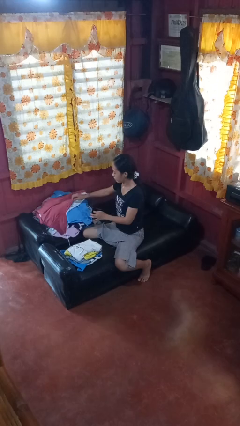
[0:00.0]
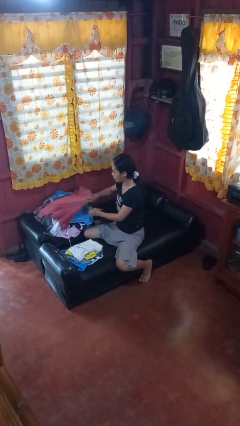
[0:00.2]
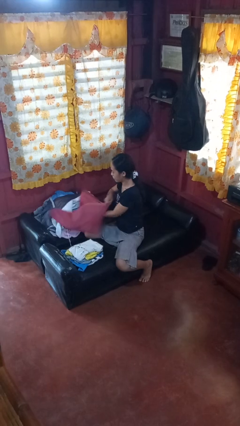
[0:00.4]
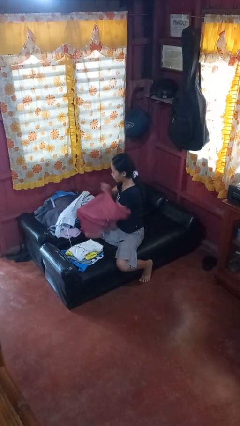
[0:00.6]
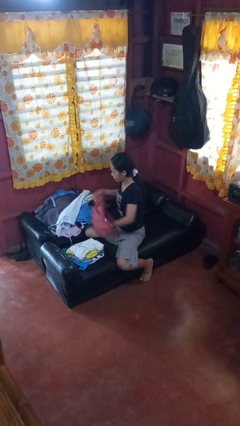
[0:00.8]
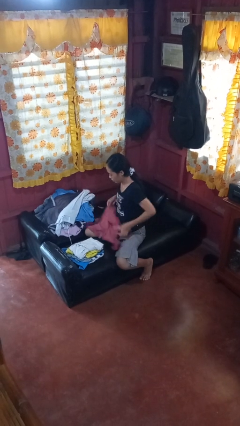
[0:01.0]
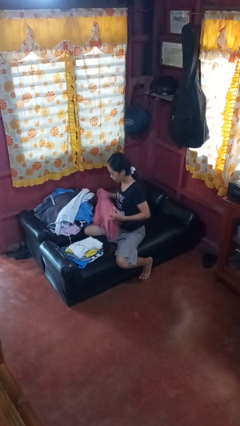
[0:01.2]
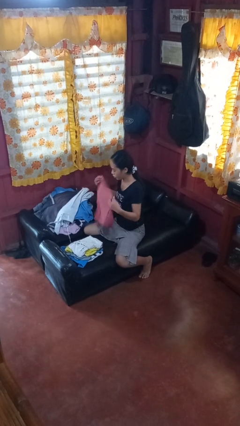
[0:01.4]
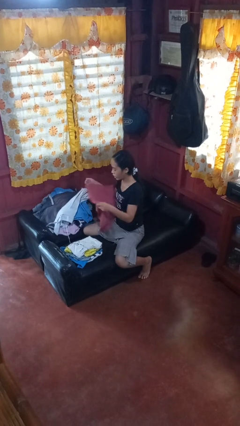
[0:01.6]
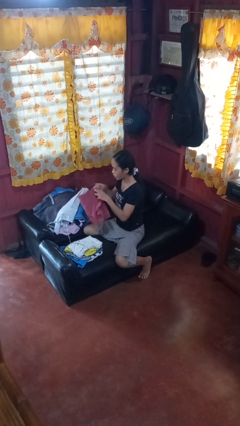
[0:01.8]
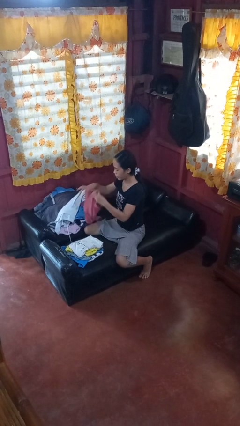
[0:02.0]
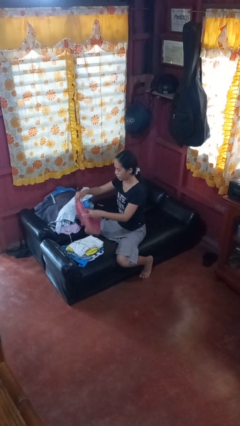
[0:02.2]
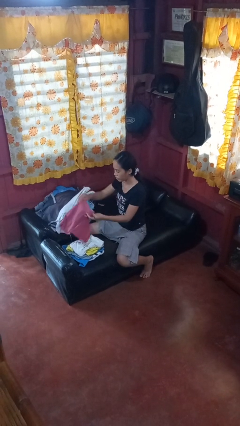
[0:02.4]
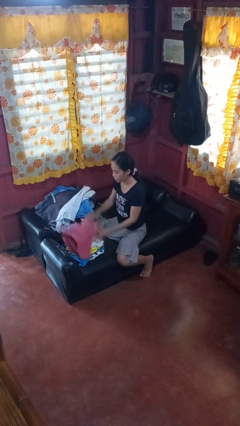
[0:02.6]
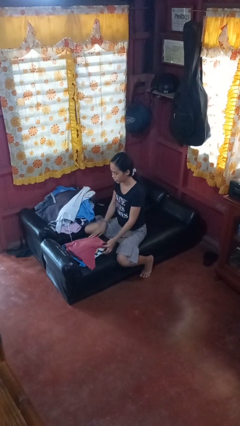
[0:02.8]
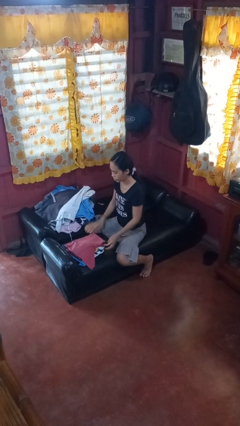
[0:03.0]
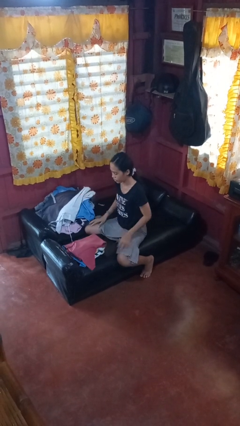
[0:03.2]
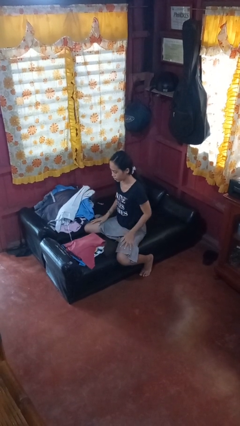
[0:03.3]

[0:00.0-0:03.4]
person folds shirt

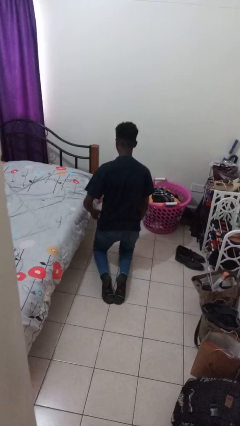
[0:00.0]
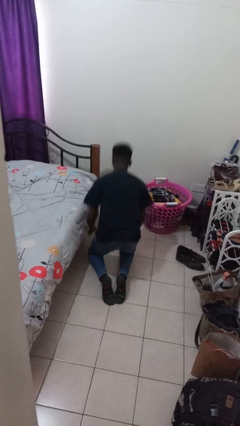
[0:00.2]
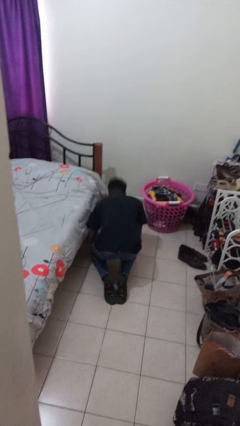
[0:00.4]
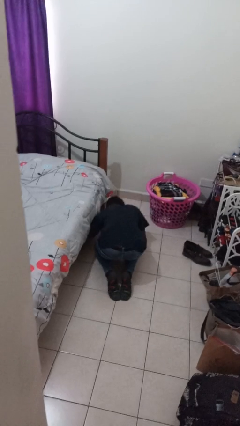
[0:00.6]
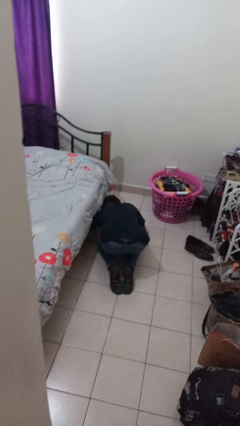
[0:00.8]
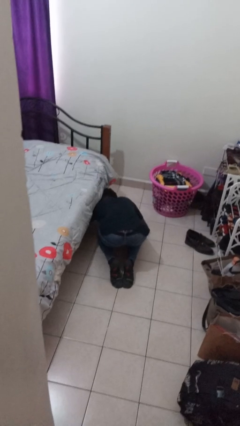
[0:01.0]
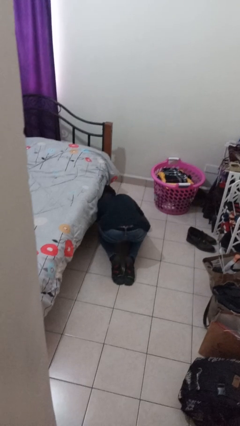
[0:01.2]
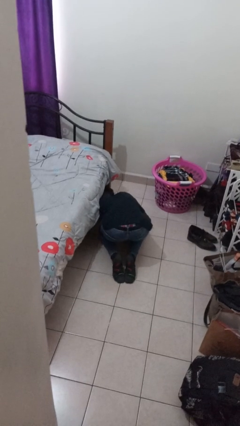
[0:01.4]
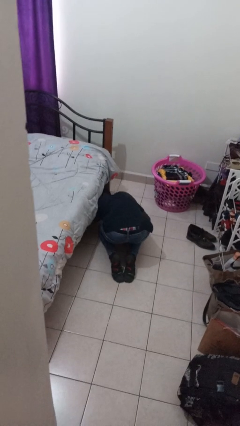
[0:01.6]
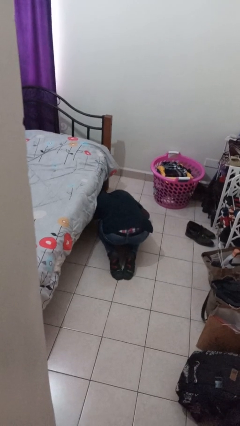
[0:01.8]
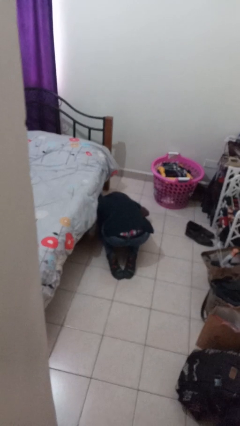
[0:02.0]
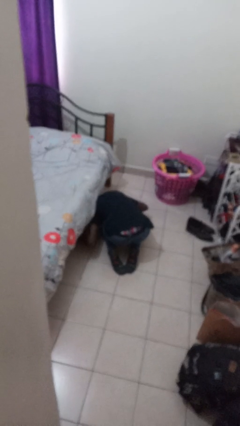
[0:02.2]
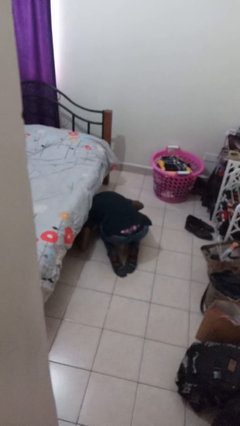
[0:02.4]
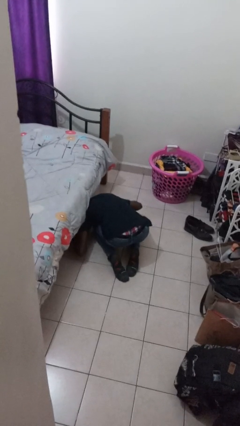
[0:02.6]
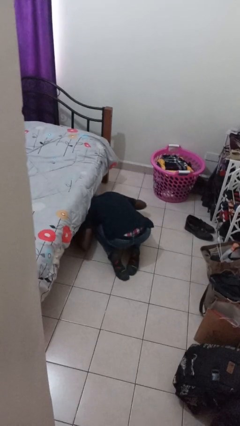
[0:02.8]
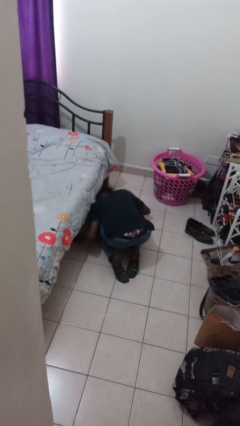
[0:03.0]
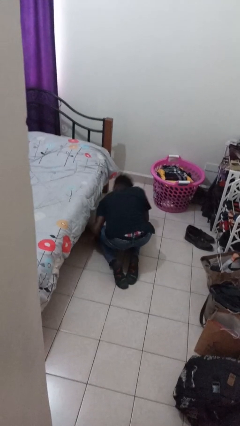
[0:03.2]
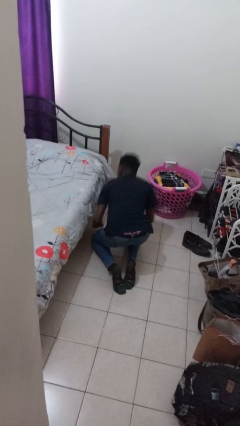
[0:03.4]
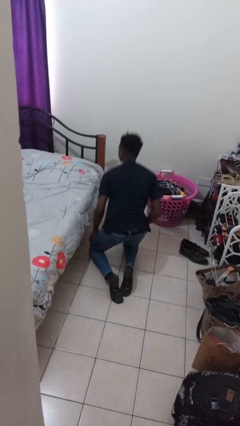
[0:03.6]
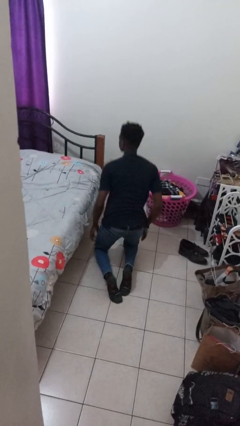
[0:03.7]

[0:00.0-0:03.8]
person searches under bed

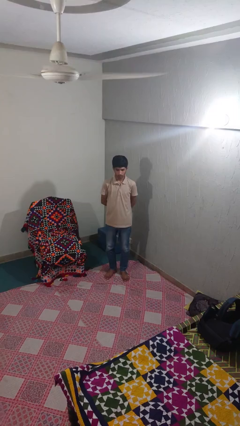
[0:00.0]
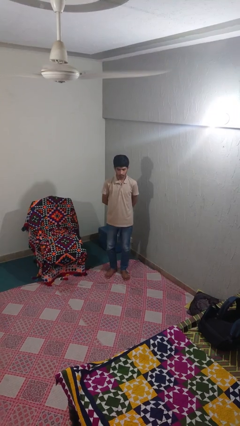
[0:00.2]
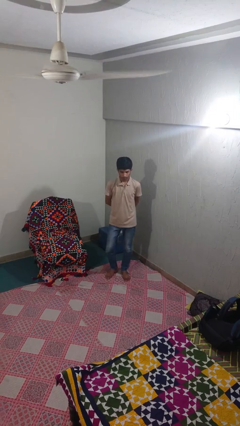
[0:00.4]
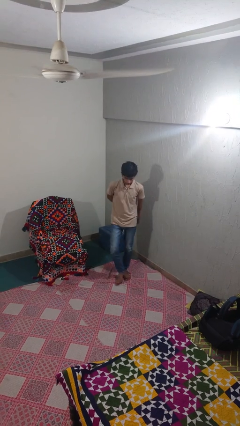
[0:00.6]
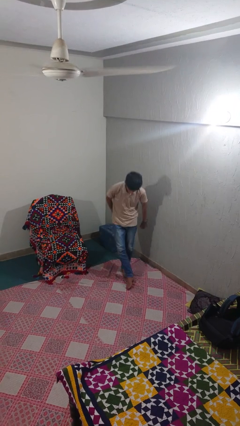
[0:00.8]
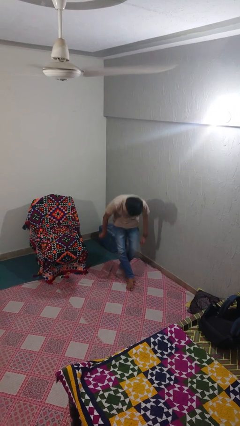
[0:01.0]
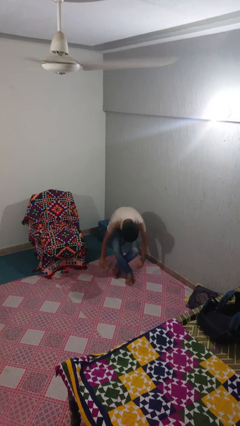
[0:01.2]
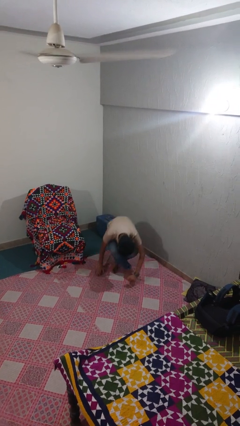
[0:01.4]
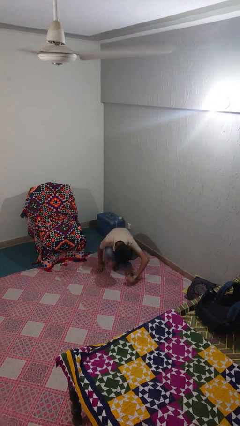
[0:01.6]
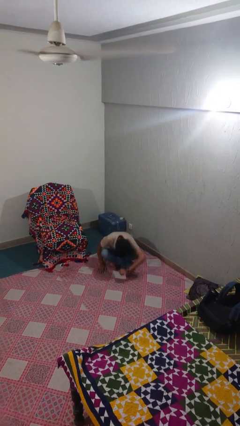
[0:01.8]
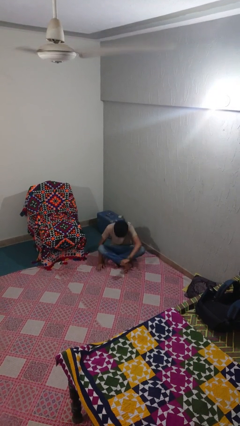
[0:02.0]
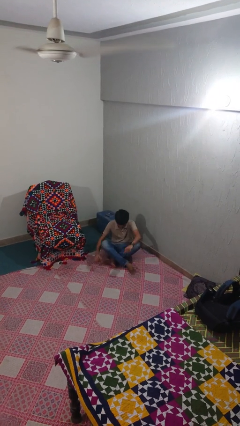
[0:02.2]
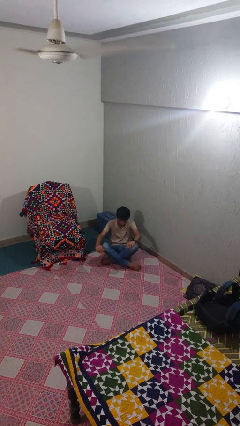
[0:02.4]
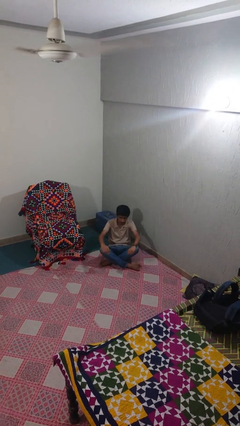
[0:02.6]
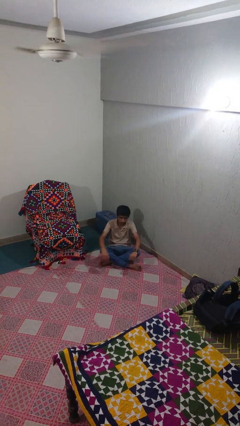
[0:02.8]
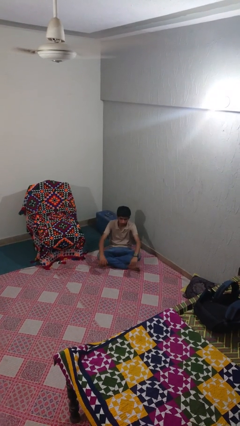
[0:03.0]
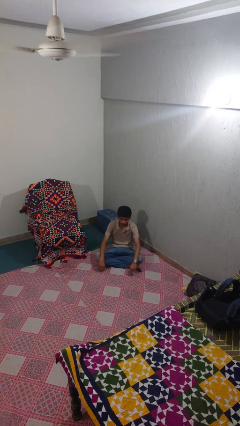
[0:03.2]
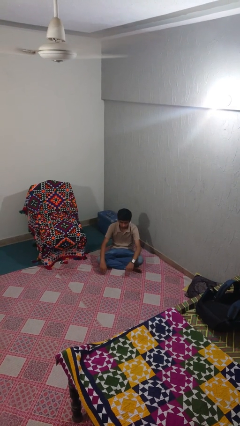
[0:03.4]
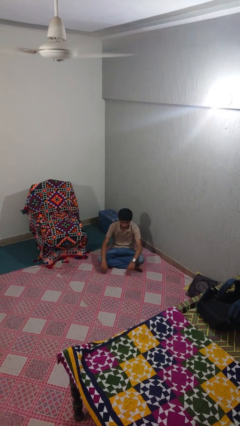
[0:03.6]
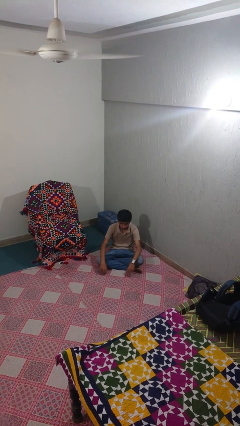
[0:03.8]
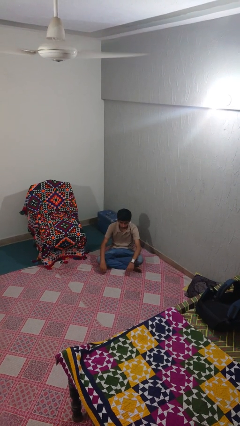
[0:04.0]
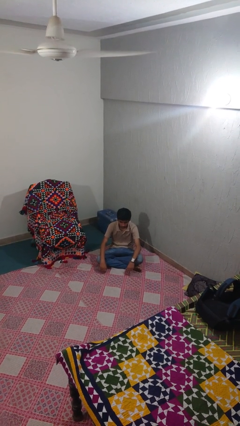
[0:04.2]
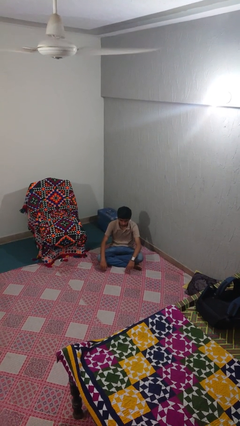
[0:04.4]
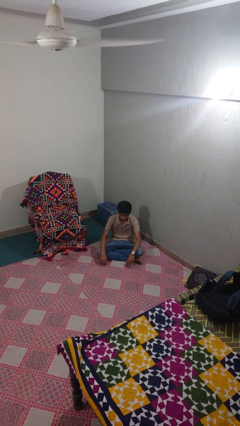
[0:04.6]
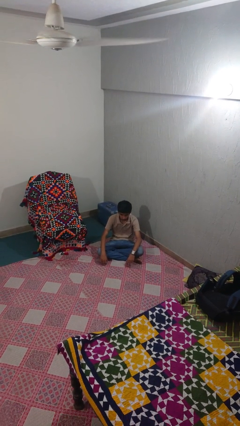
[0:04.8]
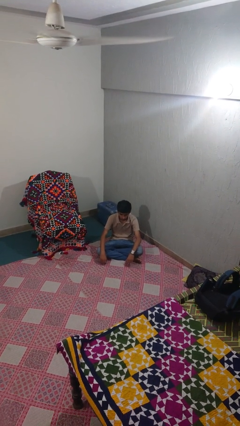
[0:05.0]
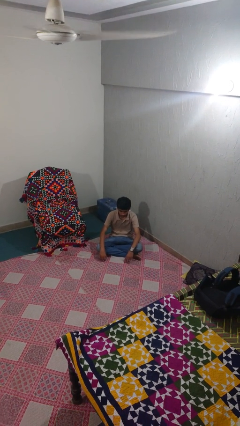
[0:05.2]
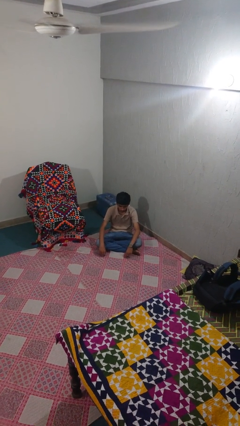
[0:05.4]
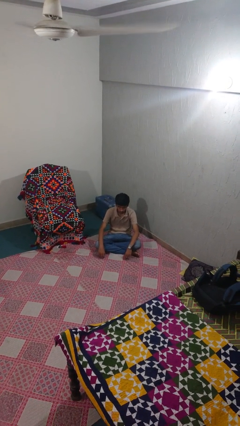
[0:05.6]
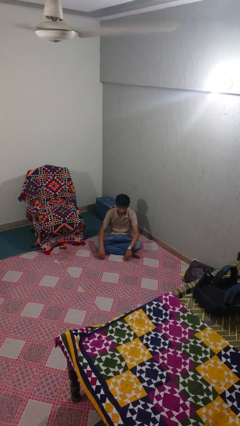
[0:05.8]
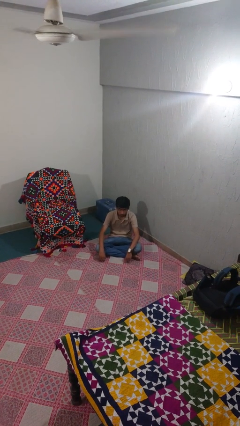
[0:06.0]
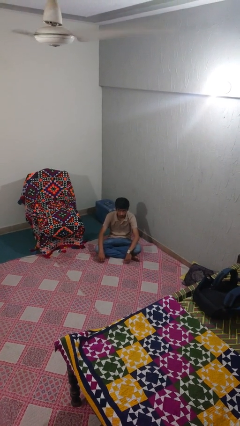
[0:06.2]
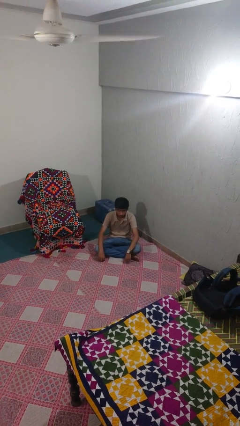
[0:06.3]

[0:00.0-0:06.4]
person sits crisscross

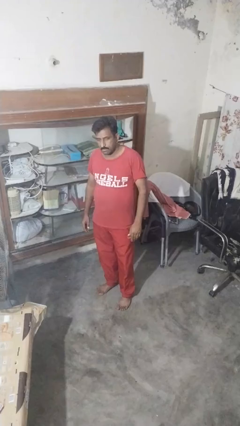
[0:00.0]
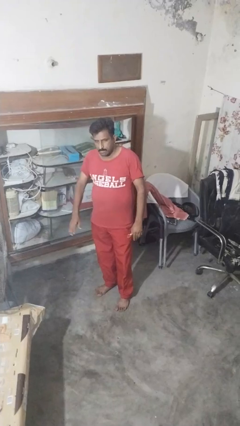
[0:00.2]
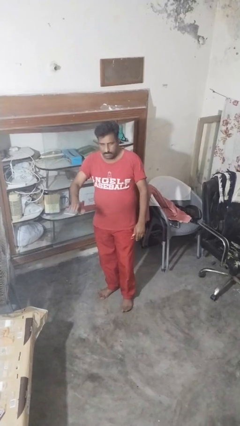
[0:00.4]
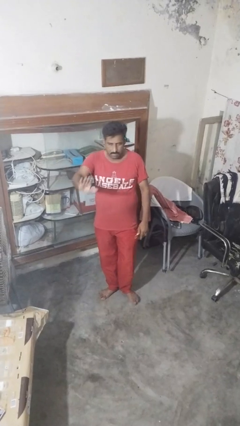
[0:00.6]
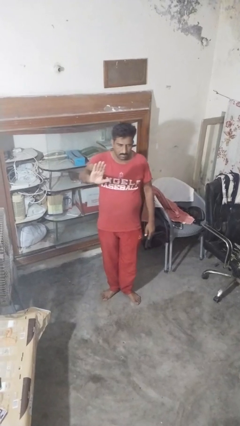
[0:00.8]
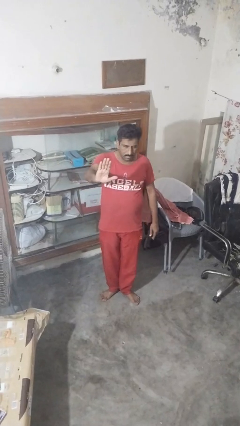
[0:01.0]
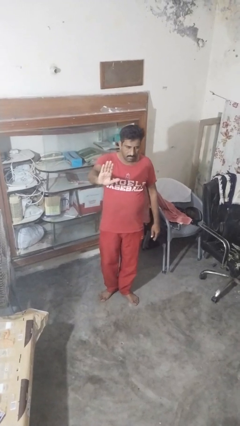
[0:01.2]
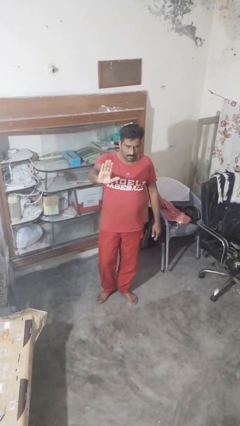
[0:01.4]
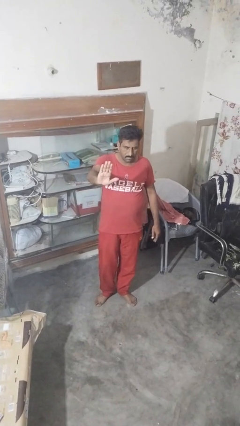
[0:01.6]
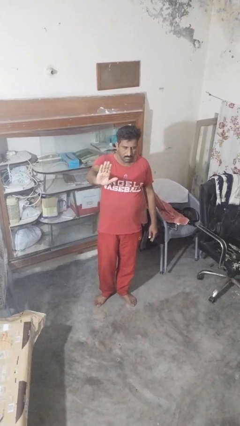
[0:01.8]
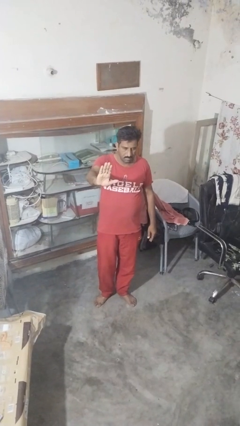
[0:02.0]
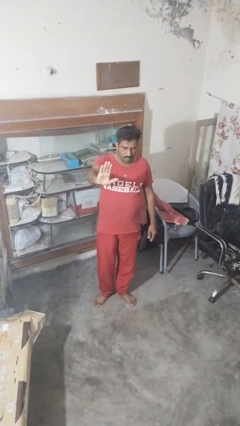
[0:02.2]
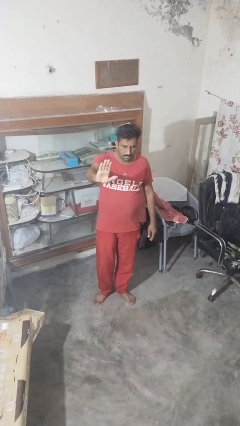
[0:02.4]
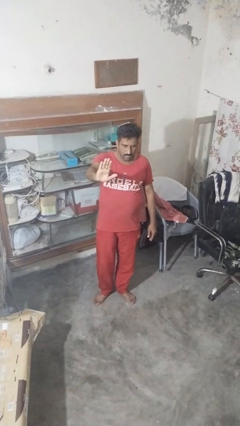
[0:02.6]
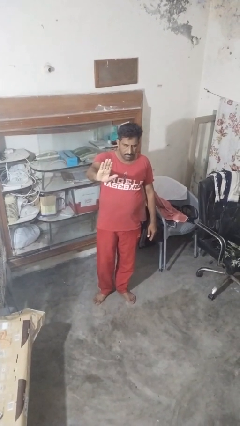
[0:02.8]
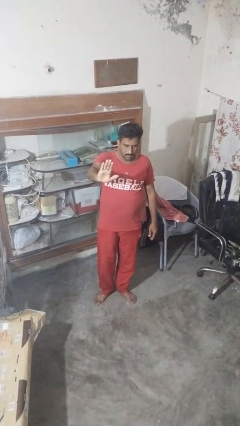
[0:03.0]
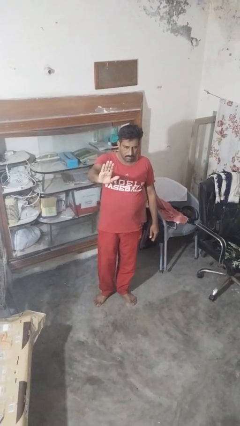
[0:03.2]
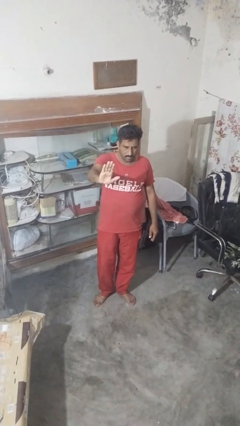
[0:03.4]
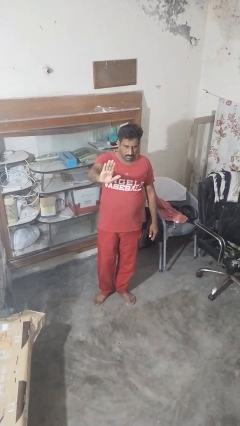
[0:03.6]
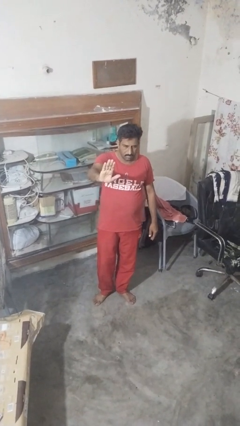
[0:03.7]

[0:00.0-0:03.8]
person gestures number five

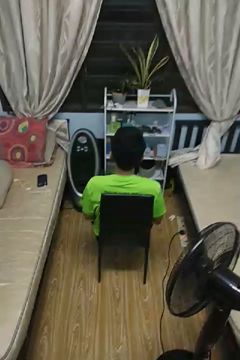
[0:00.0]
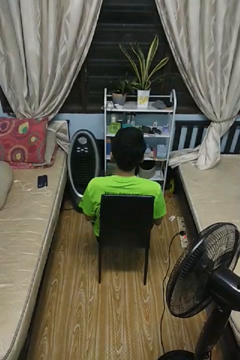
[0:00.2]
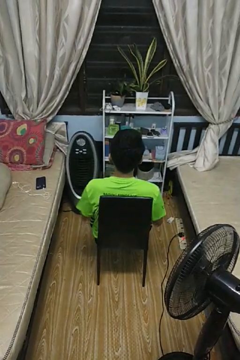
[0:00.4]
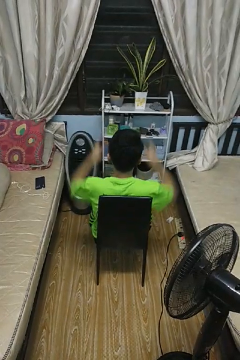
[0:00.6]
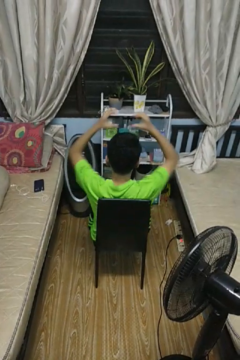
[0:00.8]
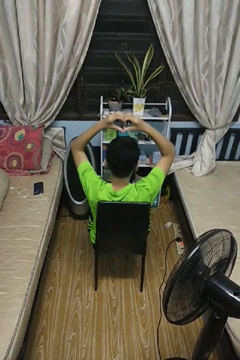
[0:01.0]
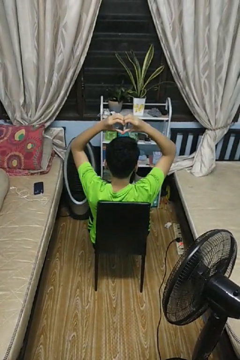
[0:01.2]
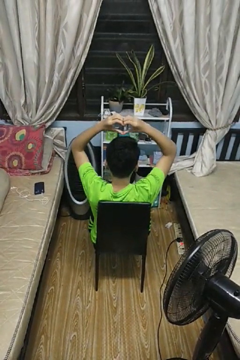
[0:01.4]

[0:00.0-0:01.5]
person gestures heart
